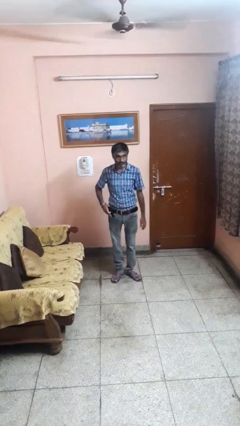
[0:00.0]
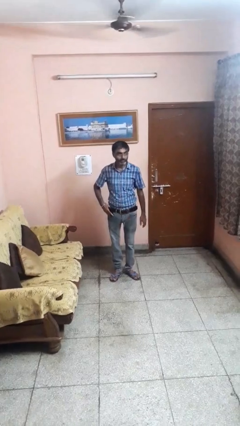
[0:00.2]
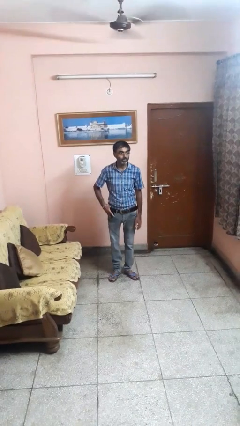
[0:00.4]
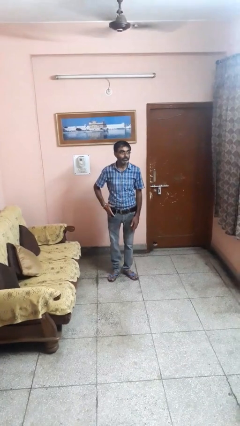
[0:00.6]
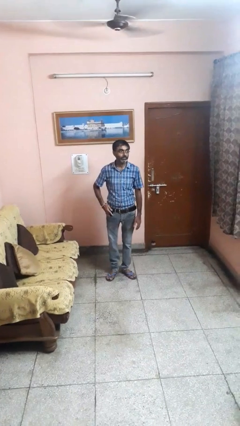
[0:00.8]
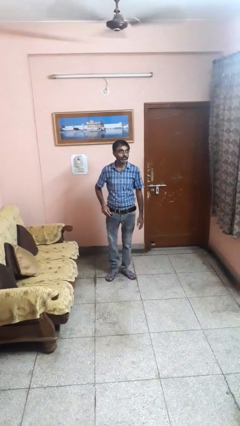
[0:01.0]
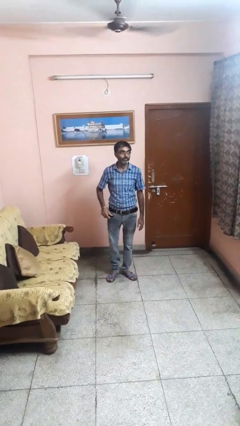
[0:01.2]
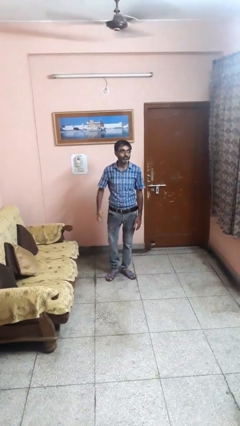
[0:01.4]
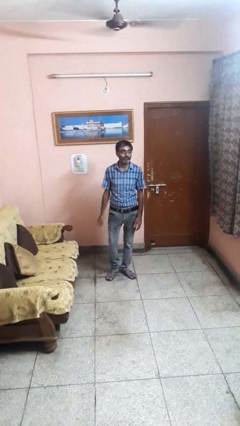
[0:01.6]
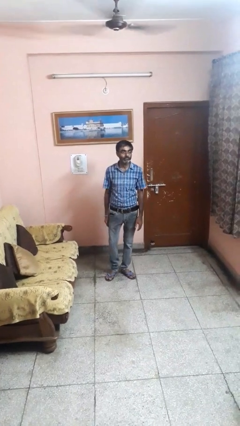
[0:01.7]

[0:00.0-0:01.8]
person puts phone into pocket

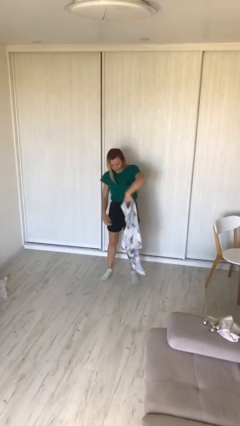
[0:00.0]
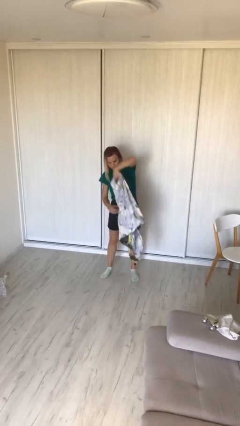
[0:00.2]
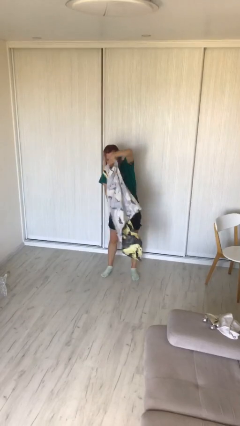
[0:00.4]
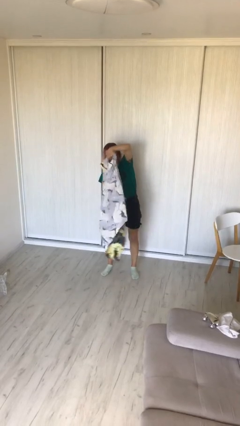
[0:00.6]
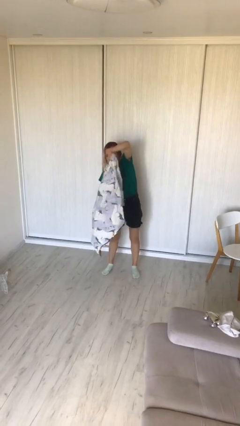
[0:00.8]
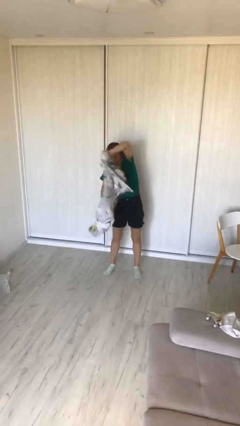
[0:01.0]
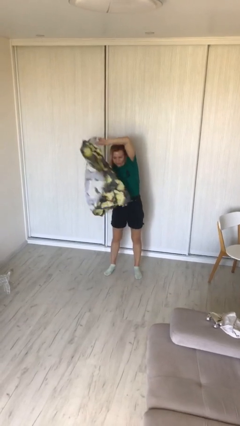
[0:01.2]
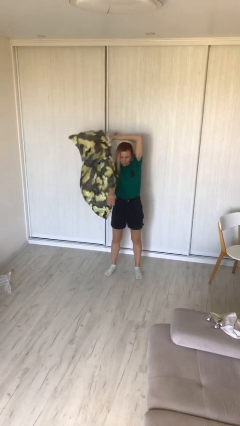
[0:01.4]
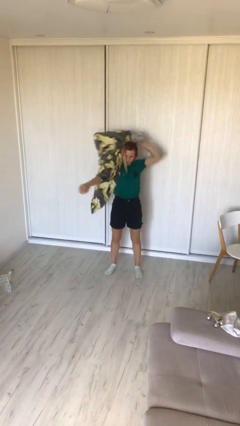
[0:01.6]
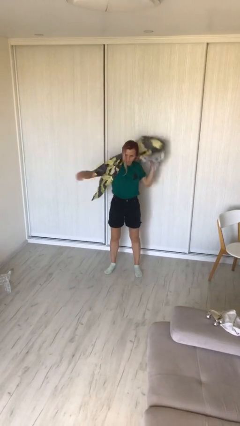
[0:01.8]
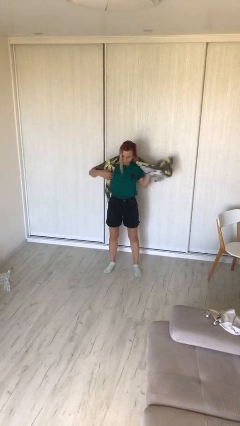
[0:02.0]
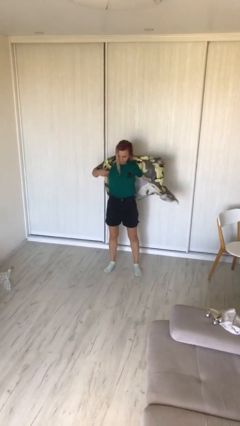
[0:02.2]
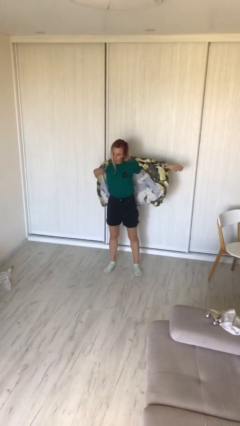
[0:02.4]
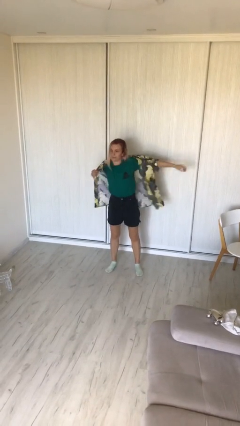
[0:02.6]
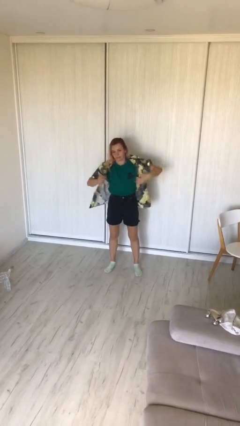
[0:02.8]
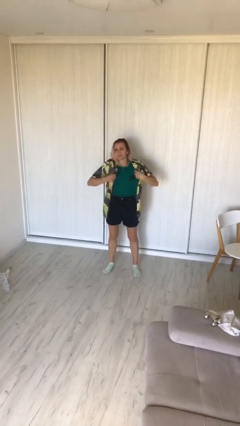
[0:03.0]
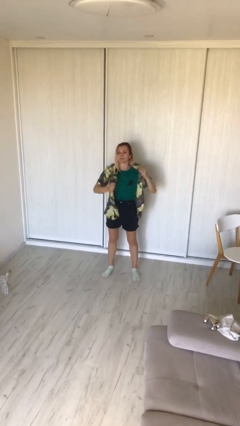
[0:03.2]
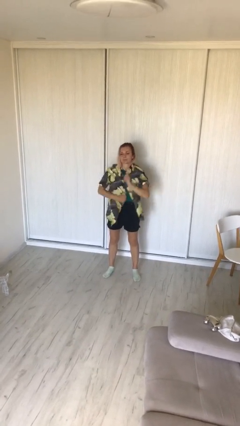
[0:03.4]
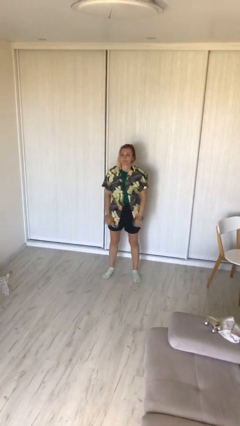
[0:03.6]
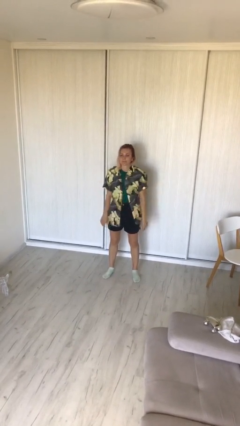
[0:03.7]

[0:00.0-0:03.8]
person puts on shirt

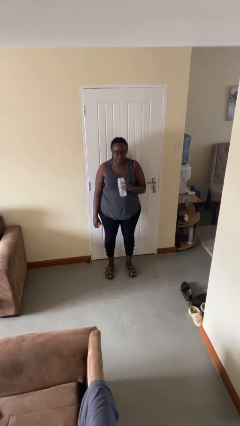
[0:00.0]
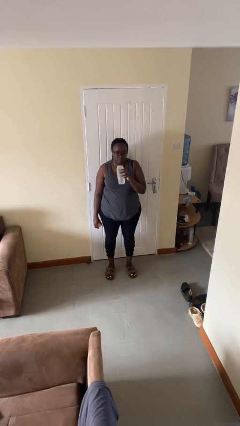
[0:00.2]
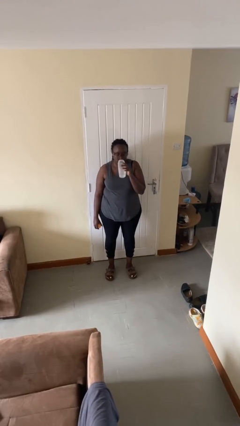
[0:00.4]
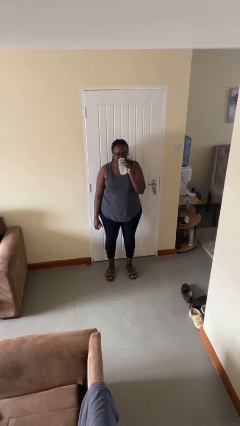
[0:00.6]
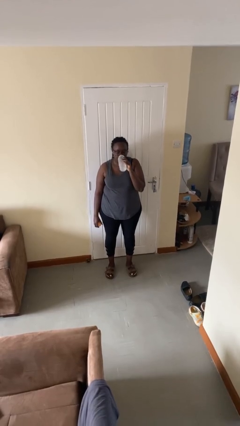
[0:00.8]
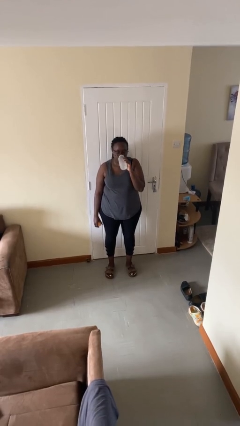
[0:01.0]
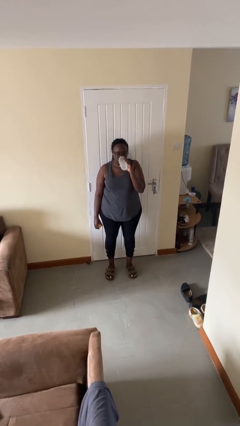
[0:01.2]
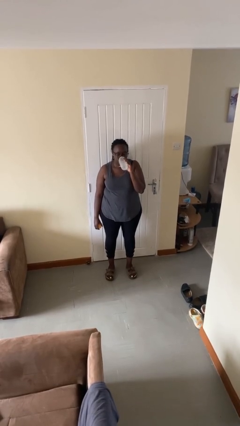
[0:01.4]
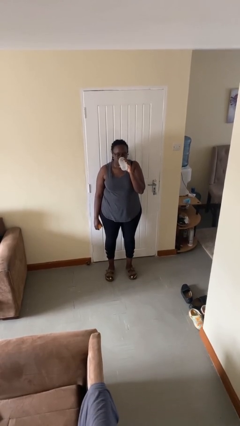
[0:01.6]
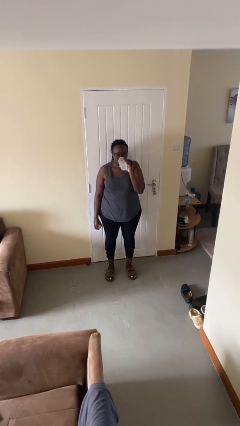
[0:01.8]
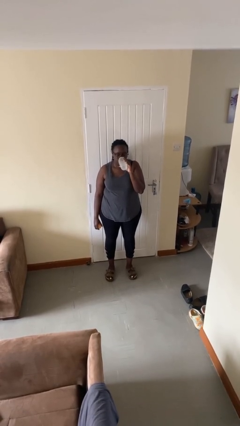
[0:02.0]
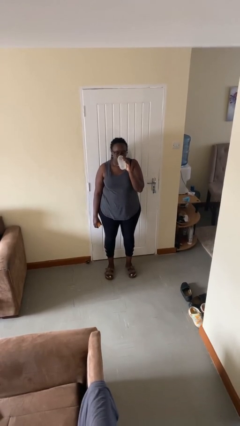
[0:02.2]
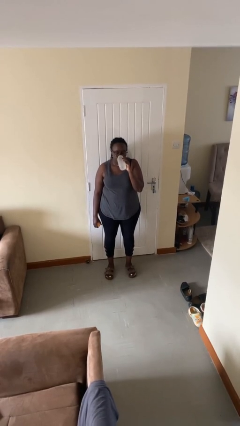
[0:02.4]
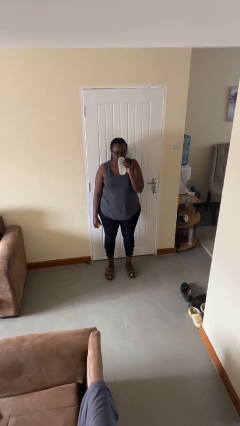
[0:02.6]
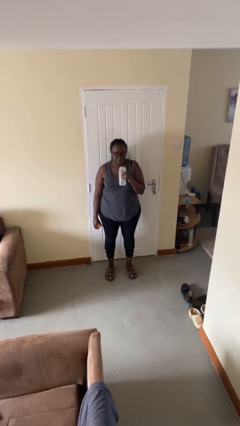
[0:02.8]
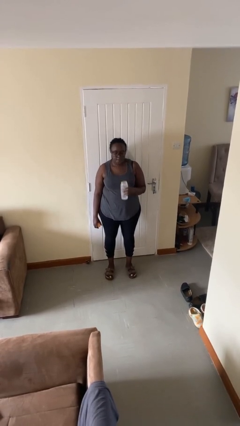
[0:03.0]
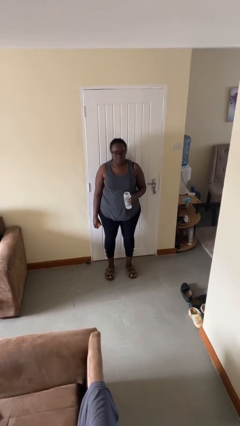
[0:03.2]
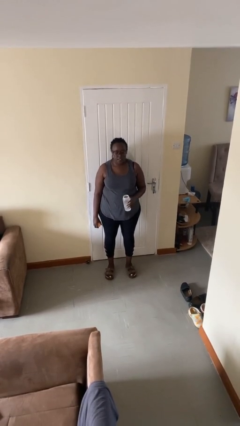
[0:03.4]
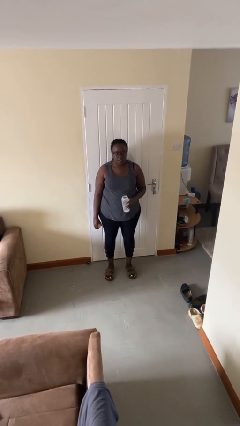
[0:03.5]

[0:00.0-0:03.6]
person drinks from bottle

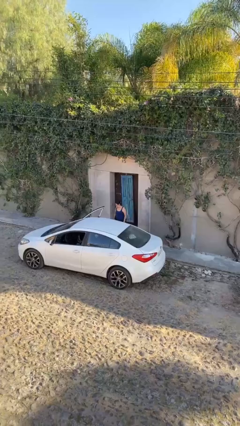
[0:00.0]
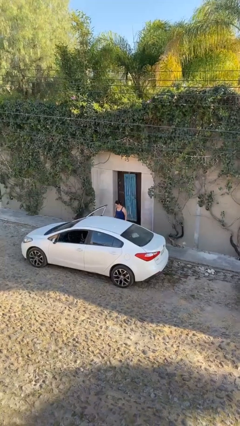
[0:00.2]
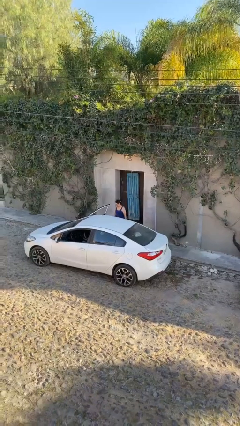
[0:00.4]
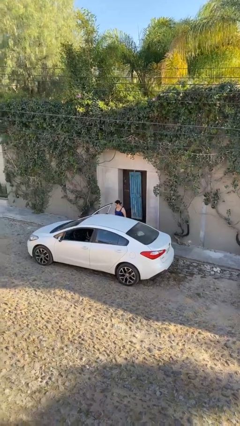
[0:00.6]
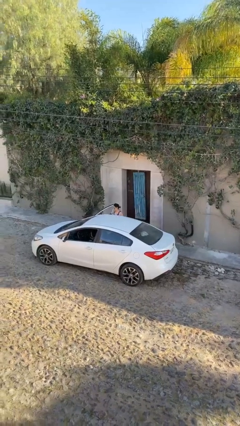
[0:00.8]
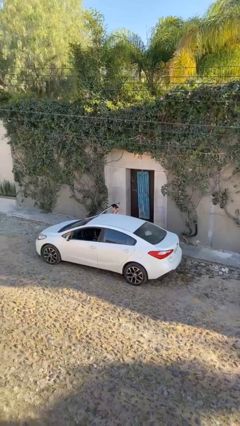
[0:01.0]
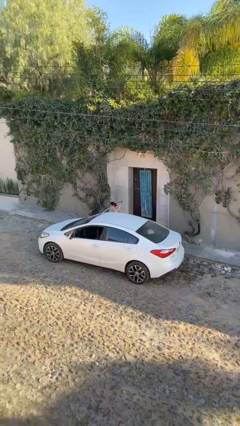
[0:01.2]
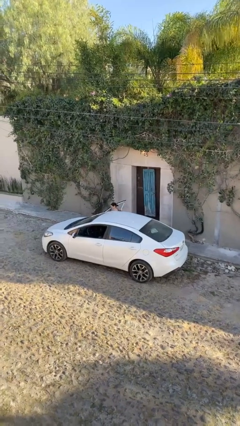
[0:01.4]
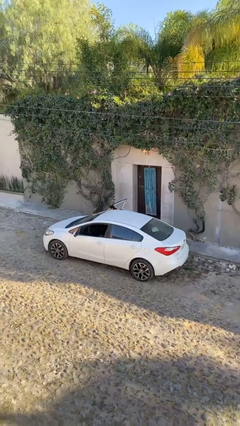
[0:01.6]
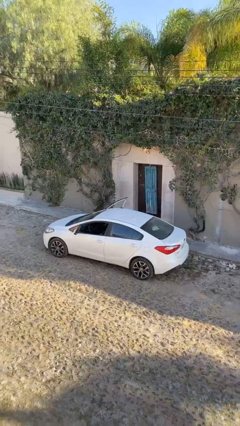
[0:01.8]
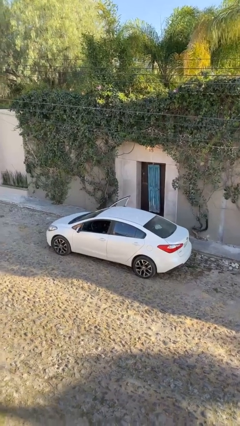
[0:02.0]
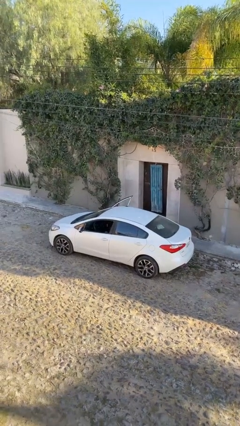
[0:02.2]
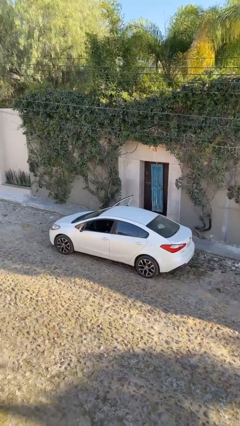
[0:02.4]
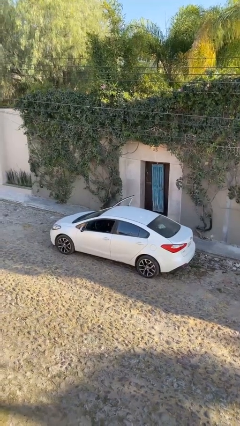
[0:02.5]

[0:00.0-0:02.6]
person enters car

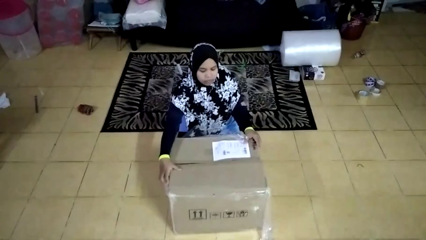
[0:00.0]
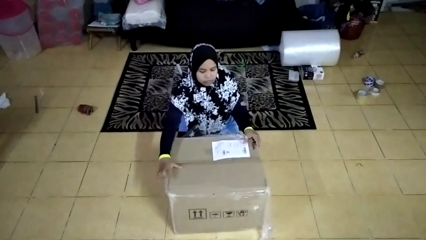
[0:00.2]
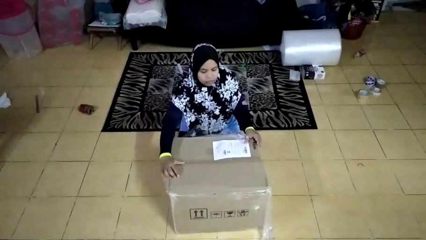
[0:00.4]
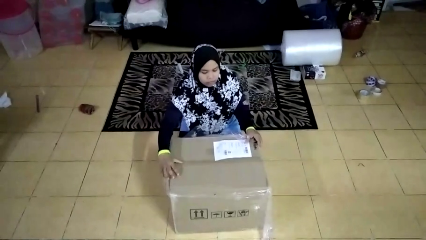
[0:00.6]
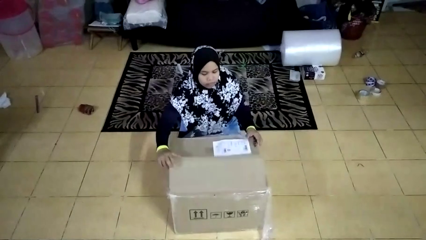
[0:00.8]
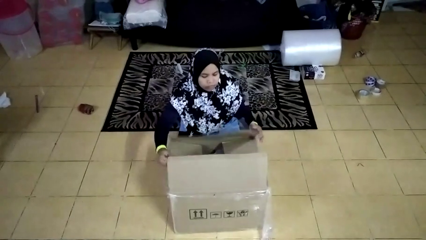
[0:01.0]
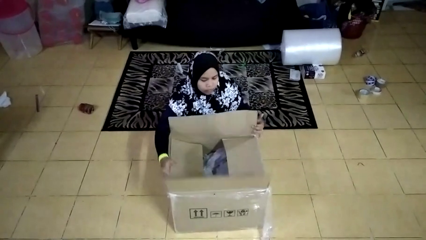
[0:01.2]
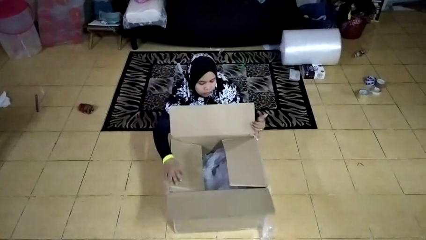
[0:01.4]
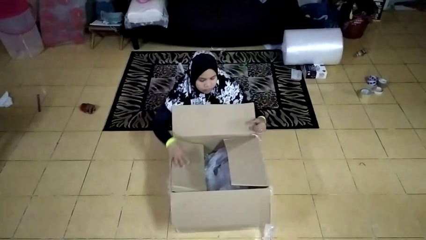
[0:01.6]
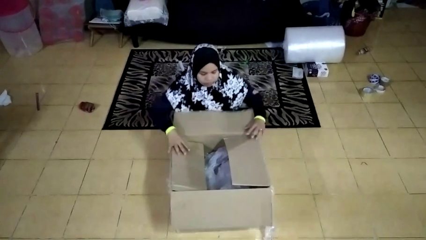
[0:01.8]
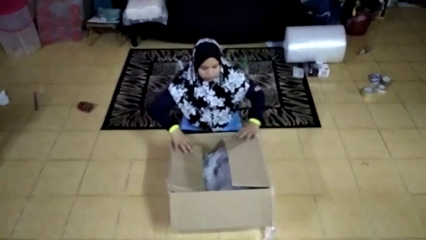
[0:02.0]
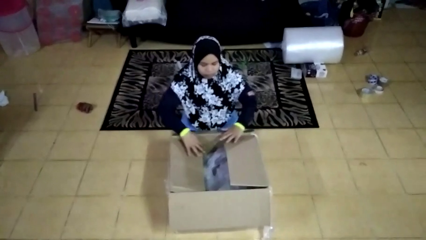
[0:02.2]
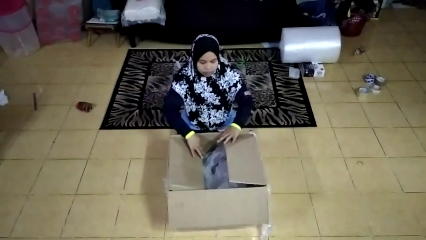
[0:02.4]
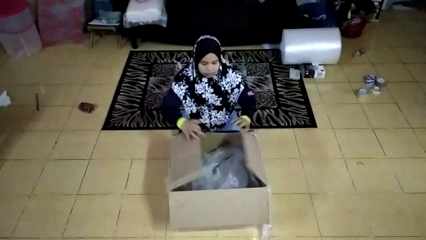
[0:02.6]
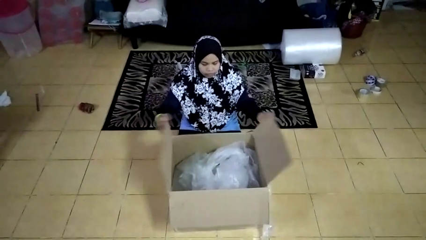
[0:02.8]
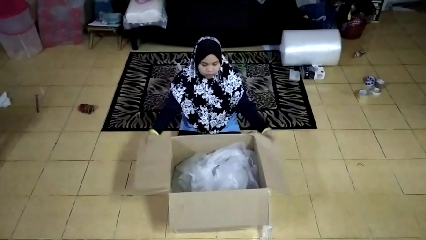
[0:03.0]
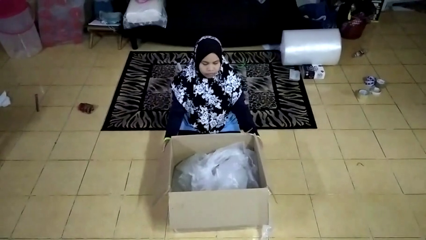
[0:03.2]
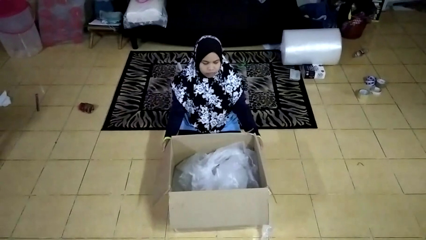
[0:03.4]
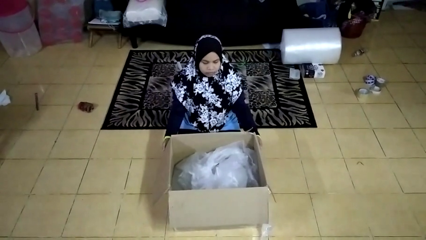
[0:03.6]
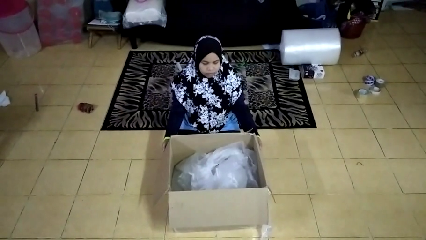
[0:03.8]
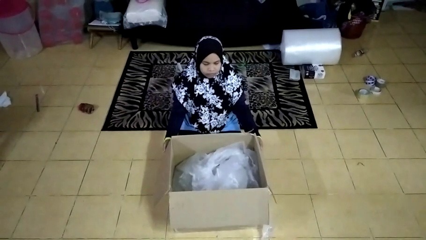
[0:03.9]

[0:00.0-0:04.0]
person opens box

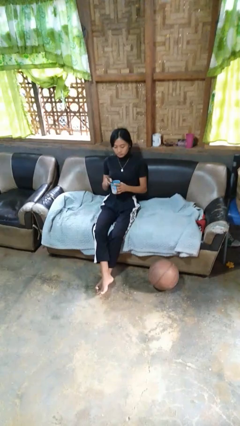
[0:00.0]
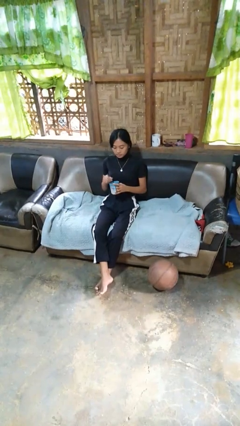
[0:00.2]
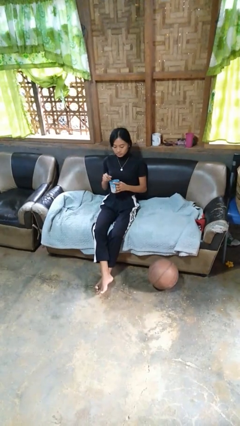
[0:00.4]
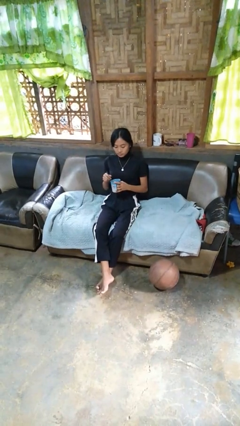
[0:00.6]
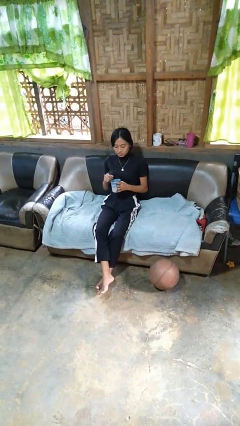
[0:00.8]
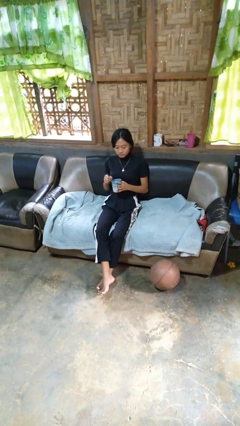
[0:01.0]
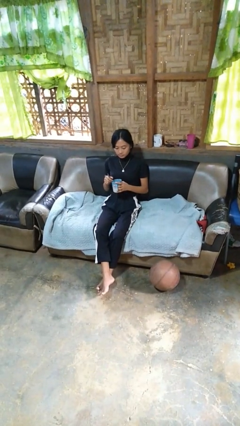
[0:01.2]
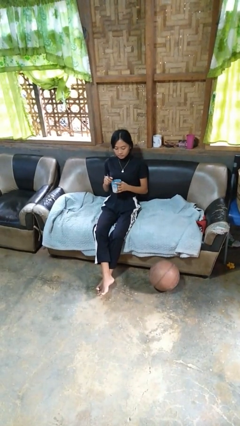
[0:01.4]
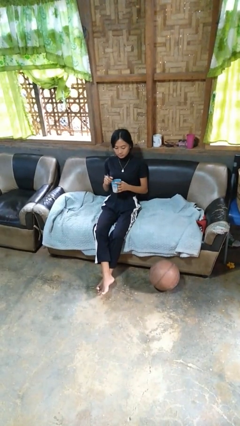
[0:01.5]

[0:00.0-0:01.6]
person stirs mug
